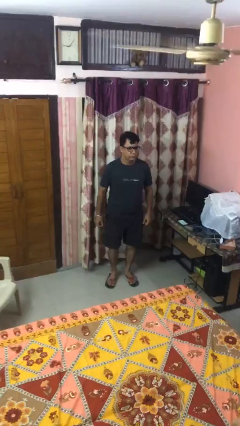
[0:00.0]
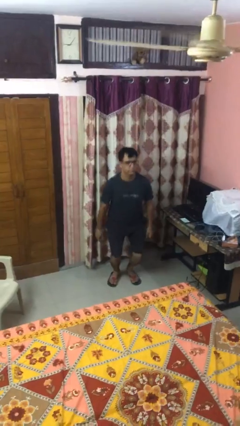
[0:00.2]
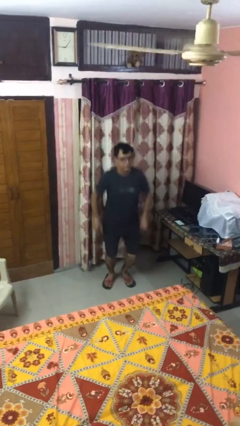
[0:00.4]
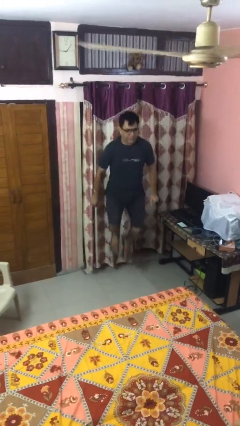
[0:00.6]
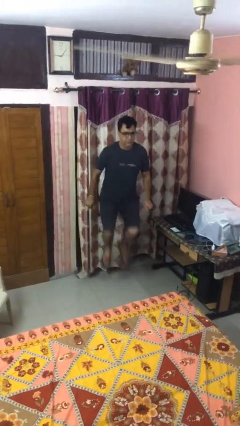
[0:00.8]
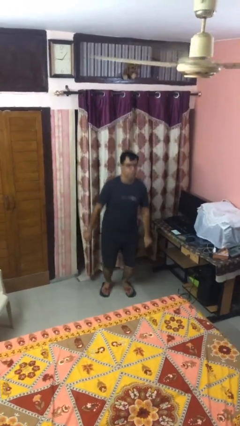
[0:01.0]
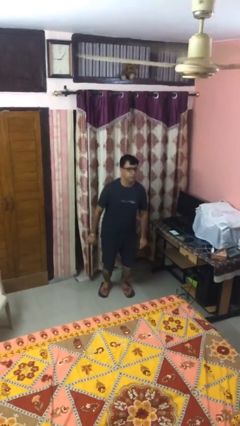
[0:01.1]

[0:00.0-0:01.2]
person jumps

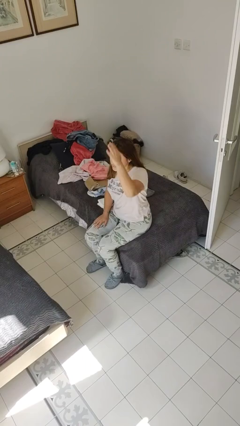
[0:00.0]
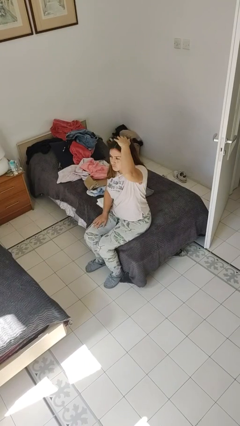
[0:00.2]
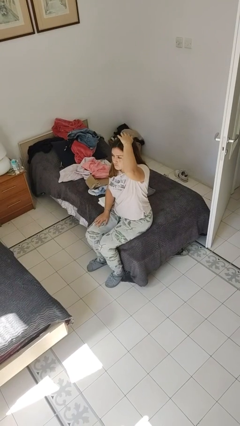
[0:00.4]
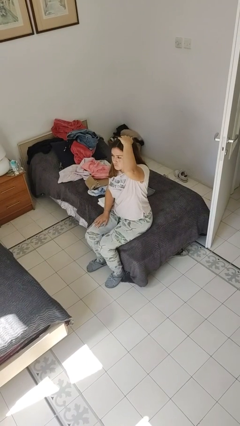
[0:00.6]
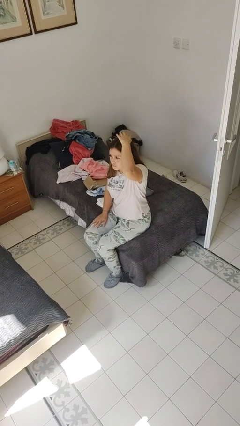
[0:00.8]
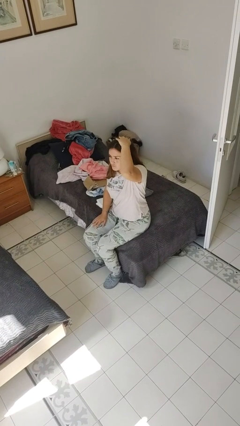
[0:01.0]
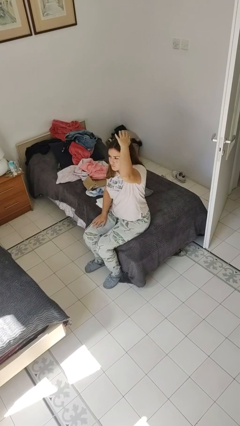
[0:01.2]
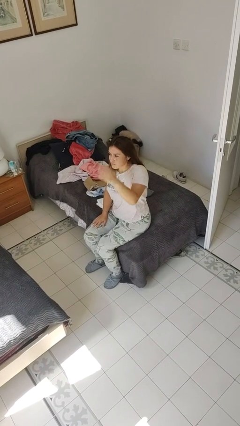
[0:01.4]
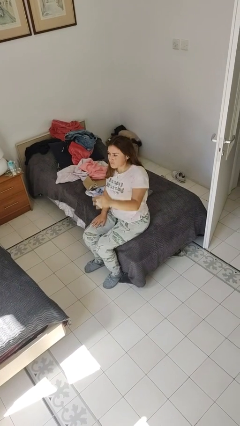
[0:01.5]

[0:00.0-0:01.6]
person pats head

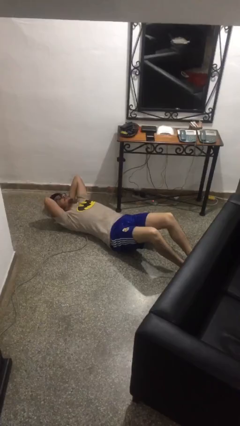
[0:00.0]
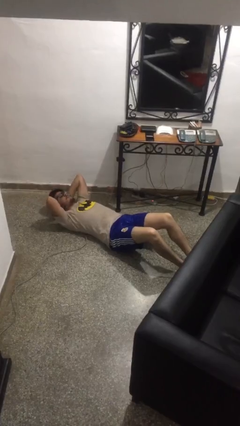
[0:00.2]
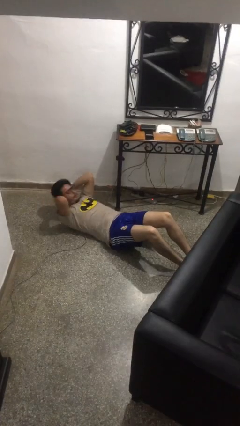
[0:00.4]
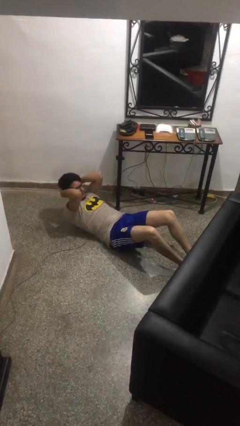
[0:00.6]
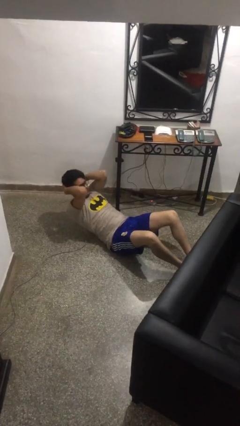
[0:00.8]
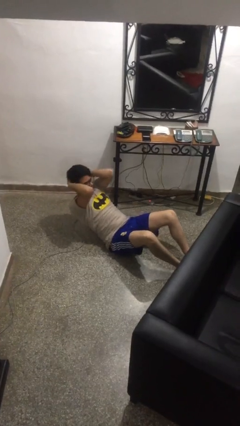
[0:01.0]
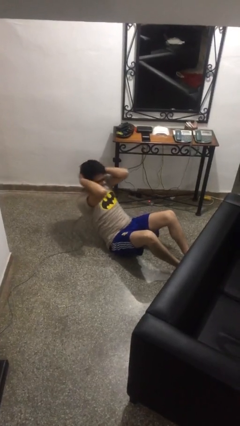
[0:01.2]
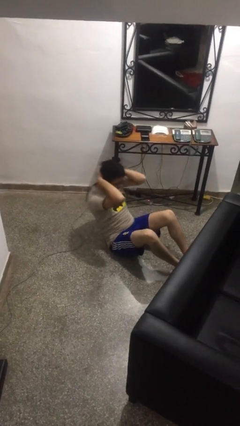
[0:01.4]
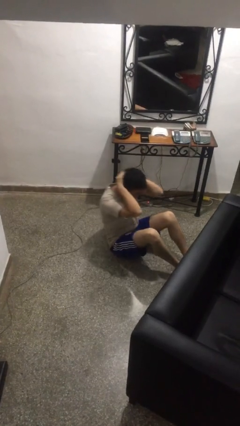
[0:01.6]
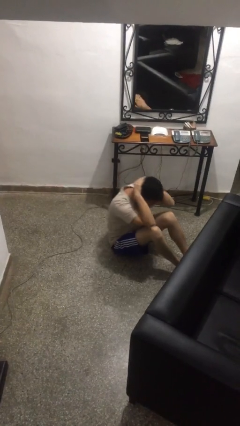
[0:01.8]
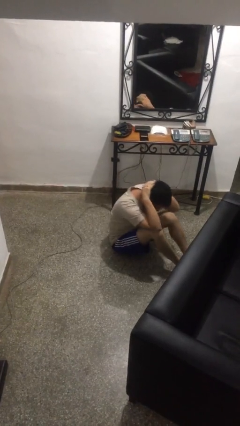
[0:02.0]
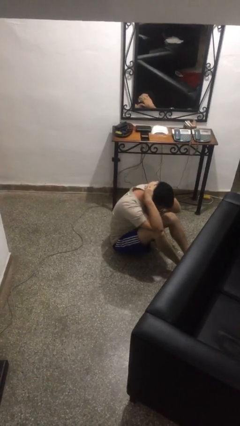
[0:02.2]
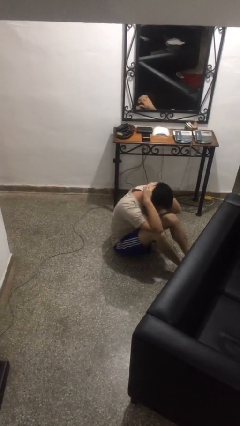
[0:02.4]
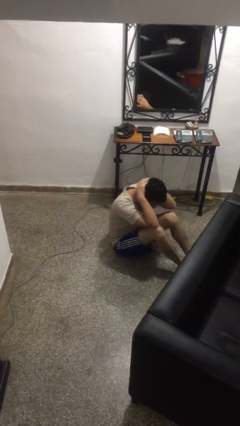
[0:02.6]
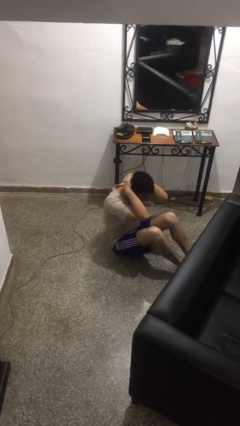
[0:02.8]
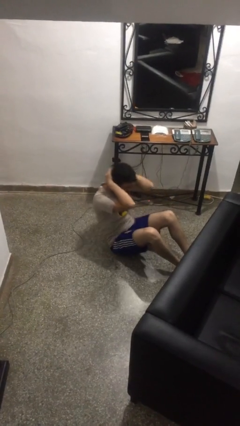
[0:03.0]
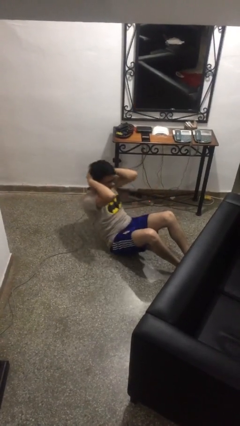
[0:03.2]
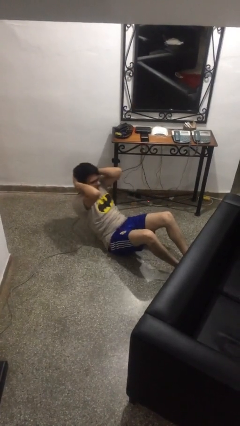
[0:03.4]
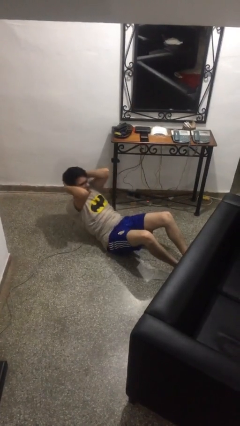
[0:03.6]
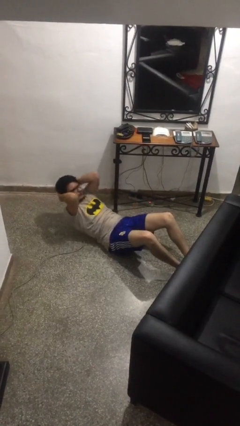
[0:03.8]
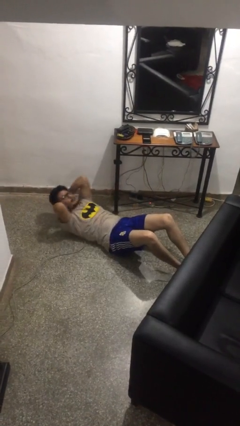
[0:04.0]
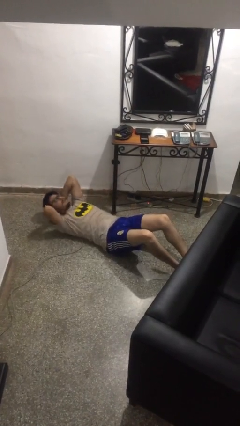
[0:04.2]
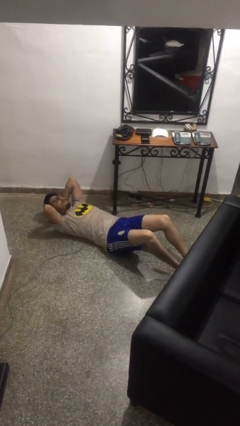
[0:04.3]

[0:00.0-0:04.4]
person exercises with situp

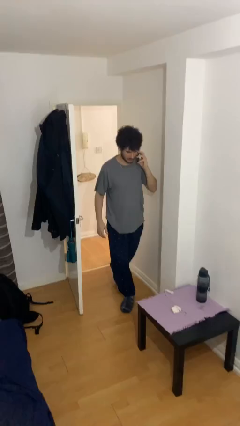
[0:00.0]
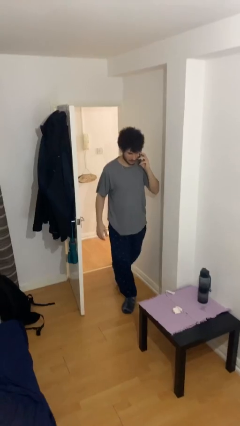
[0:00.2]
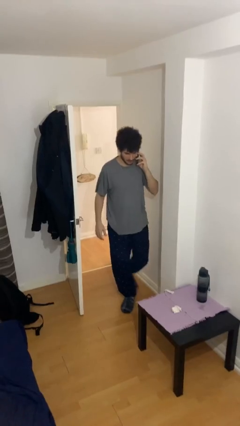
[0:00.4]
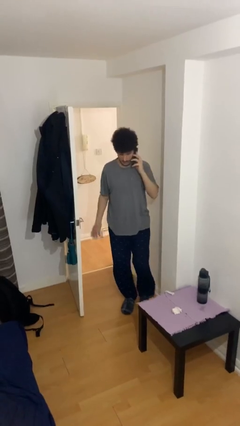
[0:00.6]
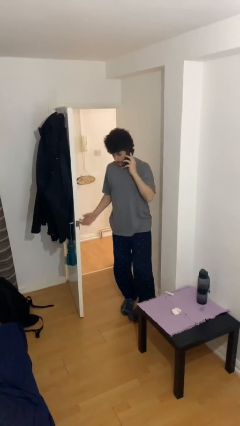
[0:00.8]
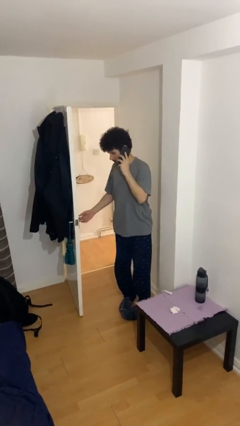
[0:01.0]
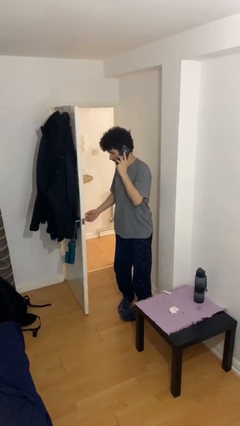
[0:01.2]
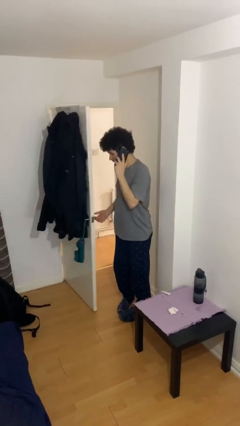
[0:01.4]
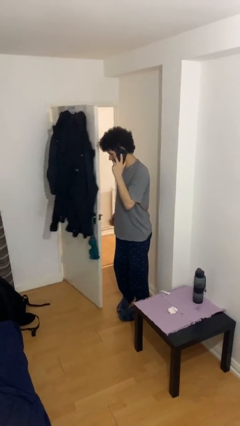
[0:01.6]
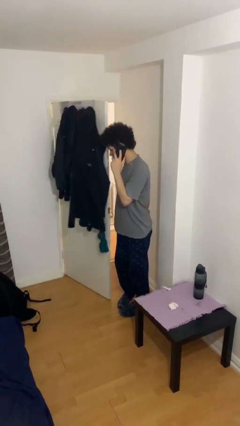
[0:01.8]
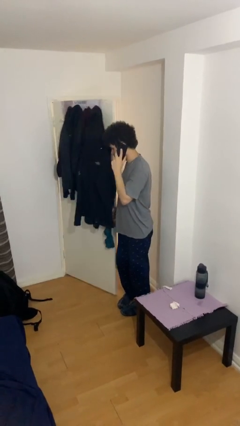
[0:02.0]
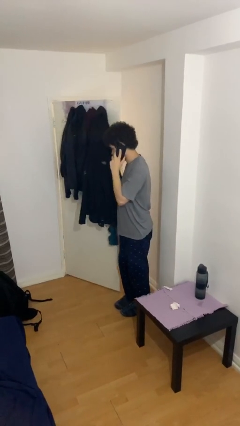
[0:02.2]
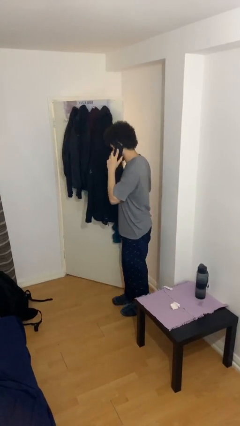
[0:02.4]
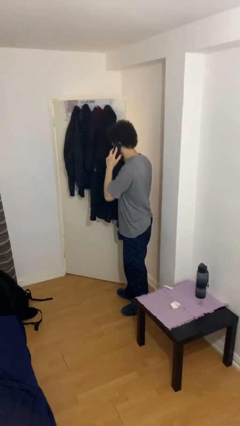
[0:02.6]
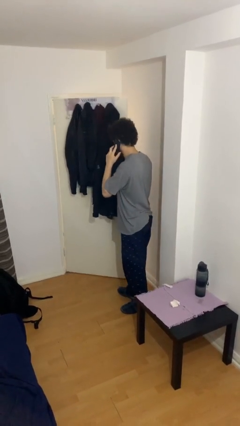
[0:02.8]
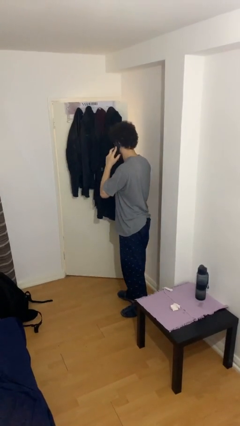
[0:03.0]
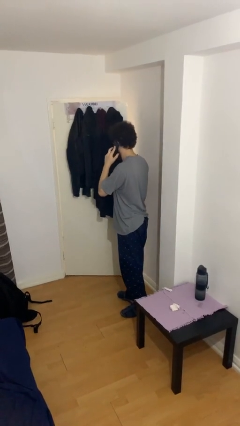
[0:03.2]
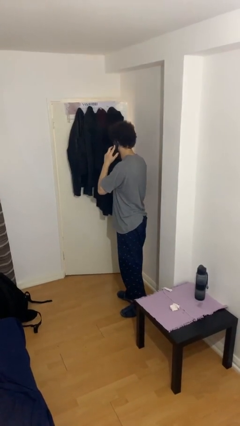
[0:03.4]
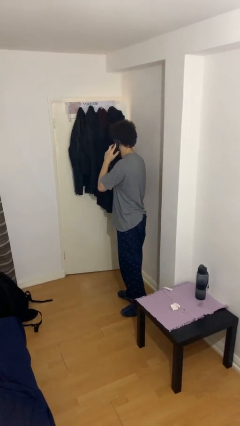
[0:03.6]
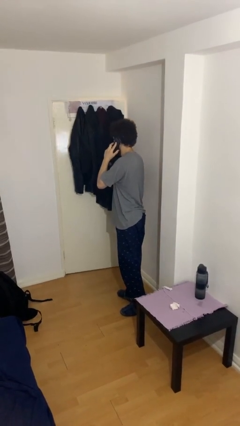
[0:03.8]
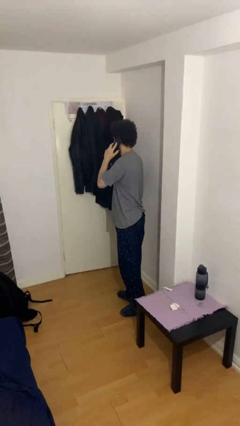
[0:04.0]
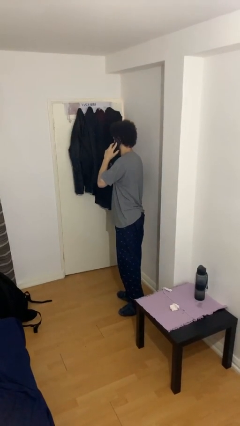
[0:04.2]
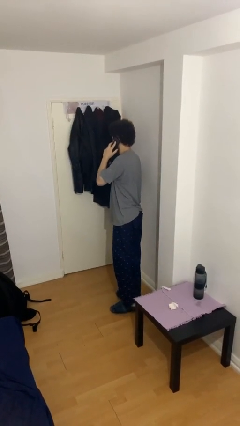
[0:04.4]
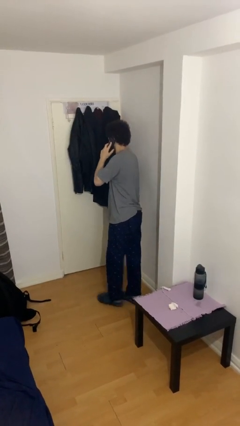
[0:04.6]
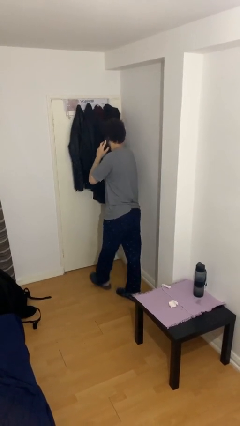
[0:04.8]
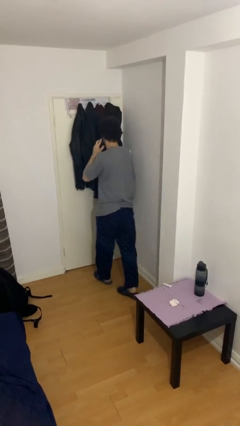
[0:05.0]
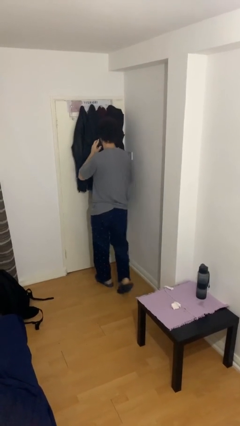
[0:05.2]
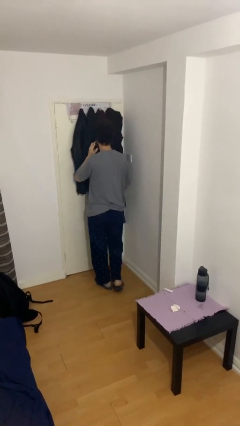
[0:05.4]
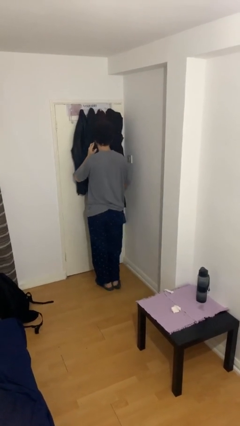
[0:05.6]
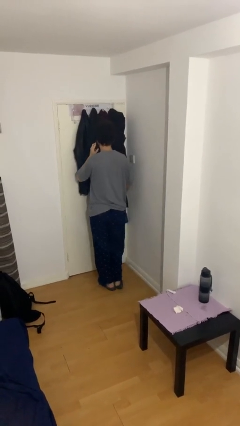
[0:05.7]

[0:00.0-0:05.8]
person closes facility door

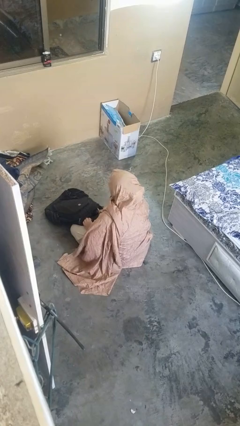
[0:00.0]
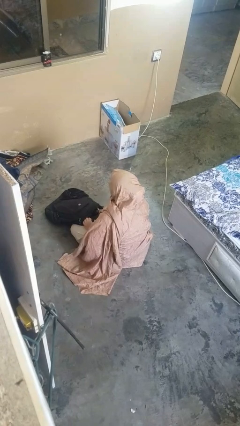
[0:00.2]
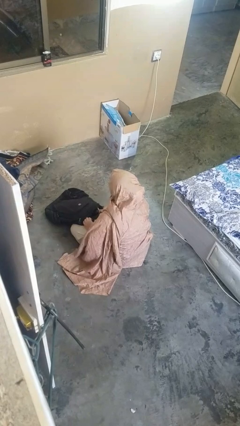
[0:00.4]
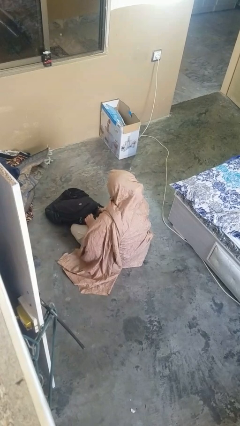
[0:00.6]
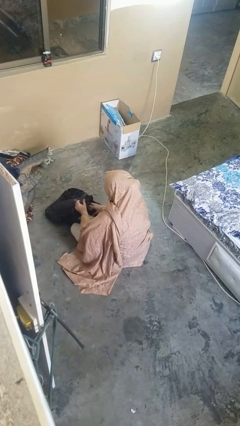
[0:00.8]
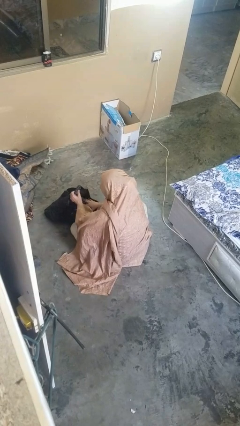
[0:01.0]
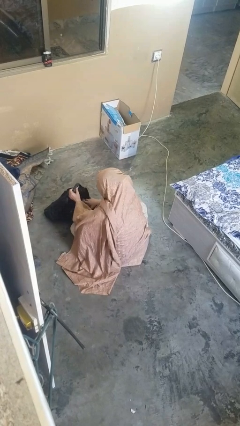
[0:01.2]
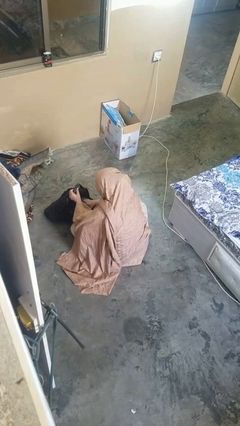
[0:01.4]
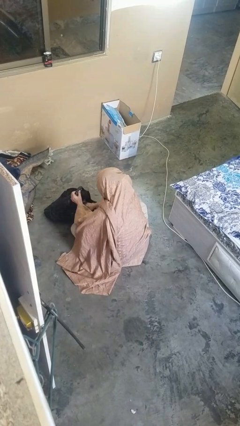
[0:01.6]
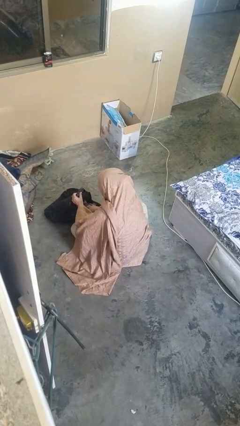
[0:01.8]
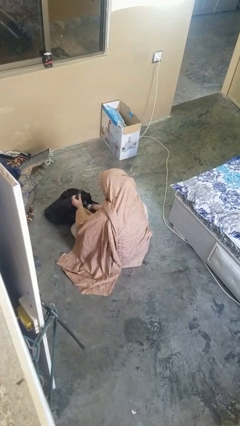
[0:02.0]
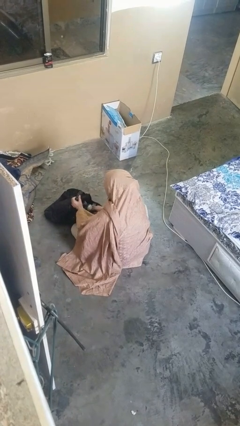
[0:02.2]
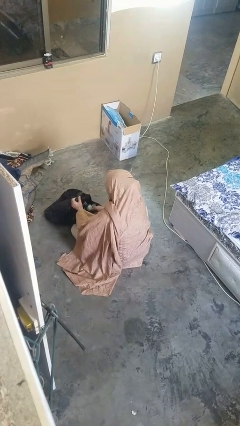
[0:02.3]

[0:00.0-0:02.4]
person searches in backpack

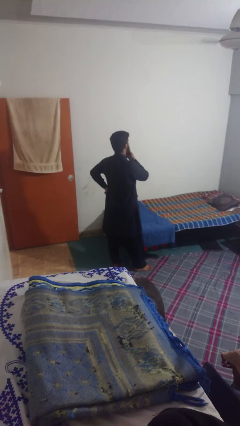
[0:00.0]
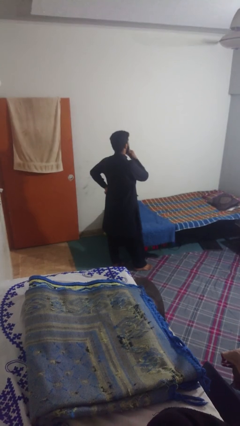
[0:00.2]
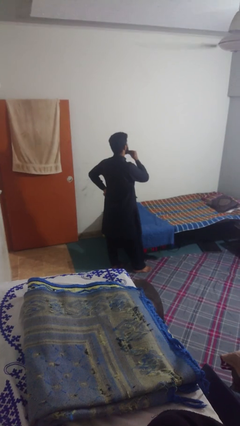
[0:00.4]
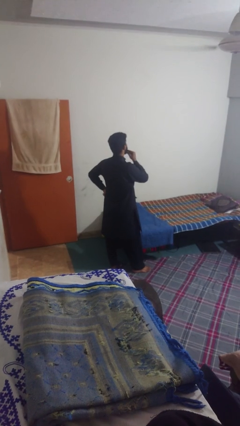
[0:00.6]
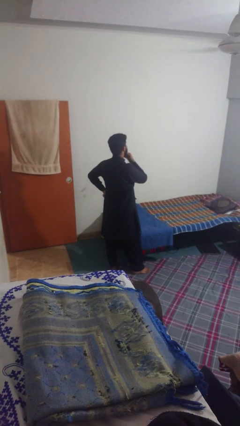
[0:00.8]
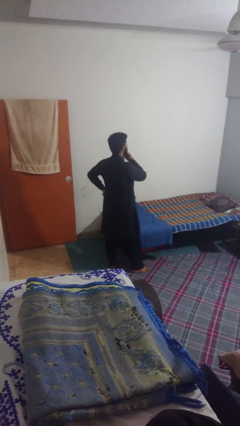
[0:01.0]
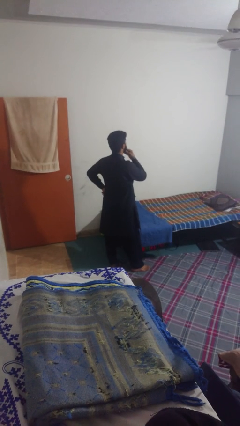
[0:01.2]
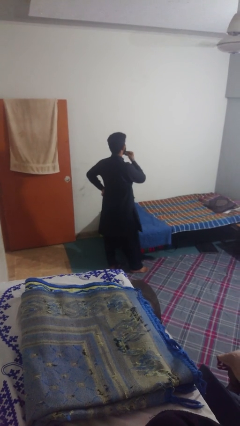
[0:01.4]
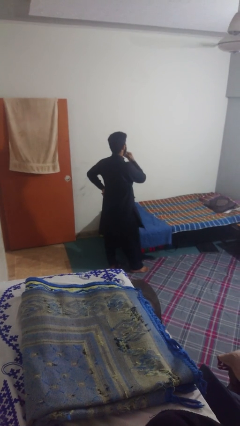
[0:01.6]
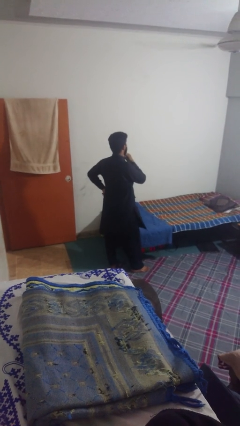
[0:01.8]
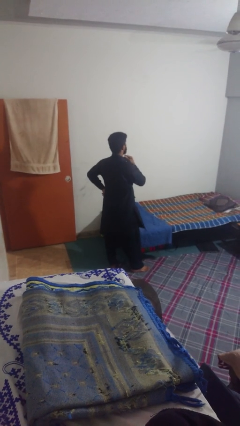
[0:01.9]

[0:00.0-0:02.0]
person strokes chin

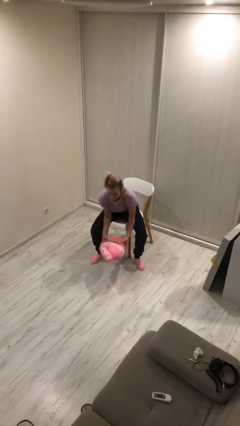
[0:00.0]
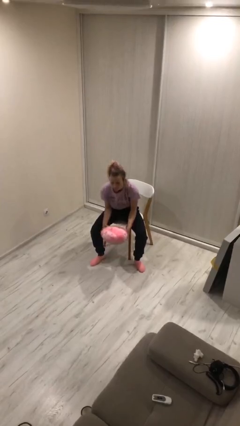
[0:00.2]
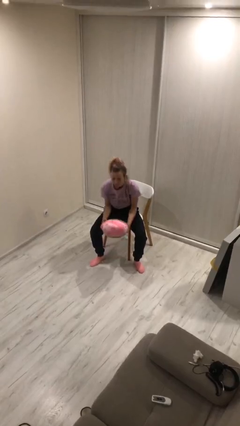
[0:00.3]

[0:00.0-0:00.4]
person picks up object from floor
